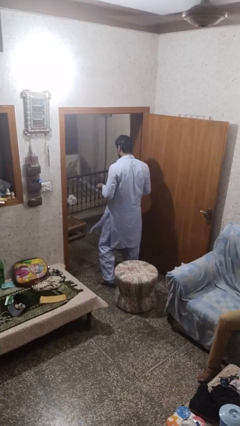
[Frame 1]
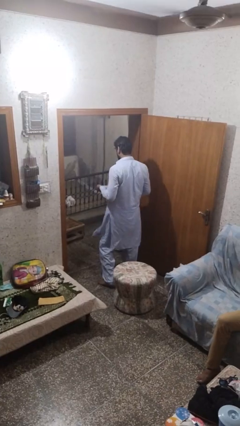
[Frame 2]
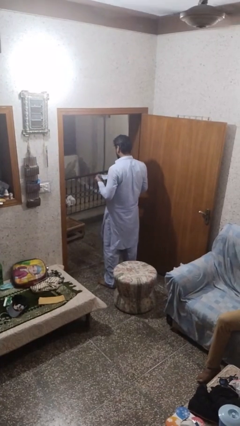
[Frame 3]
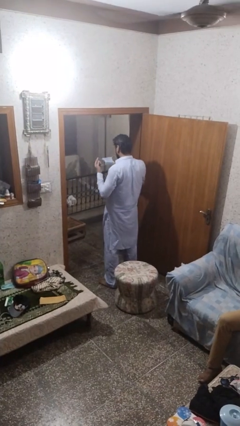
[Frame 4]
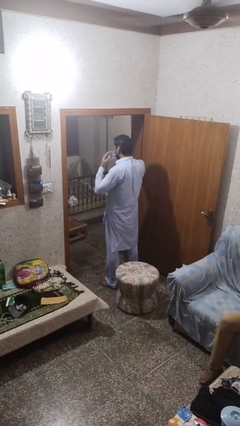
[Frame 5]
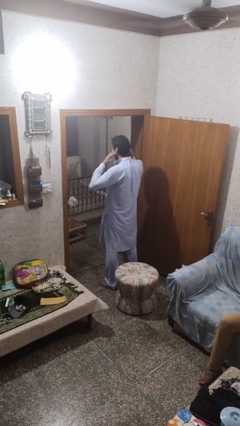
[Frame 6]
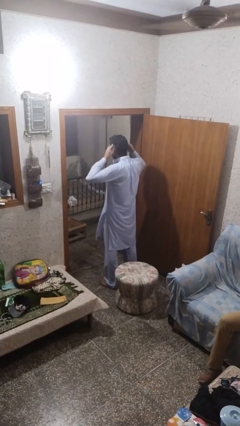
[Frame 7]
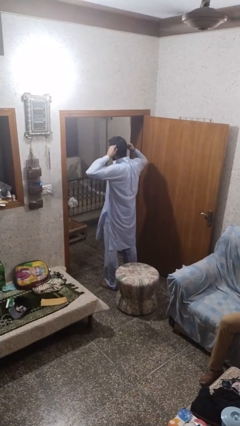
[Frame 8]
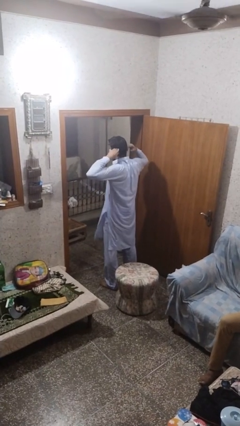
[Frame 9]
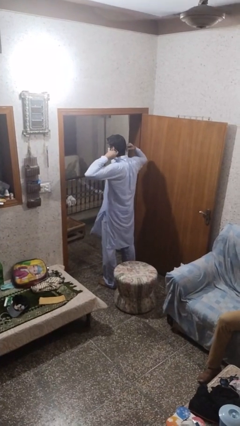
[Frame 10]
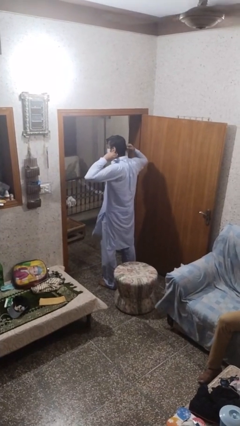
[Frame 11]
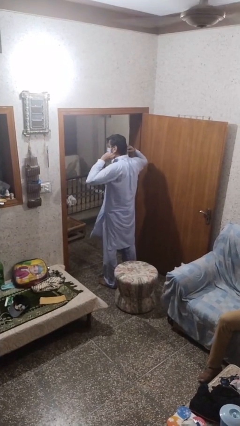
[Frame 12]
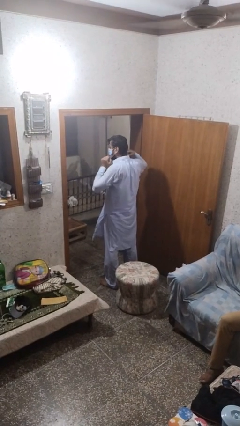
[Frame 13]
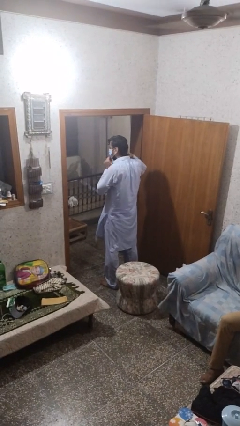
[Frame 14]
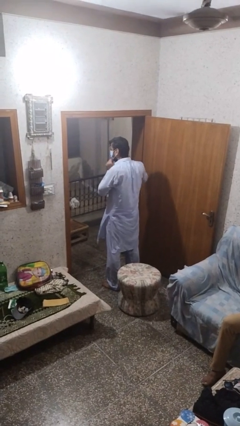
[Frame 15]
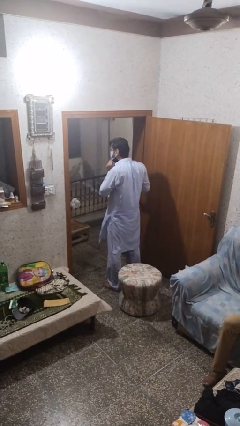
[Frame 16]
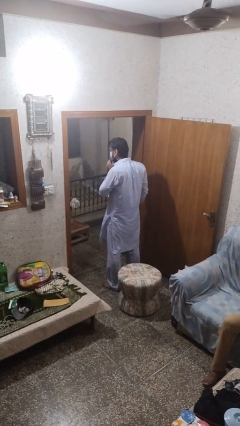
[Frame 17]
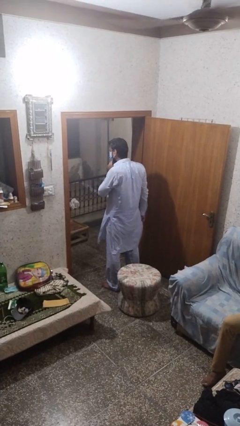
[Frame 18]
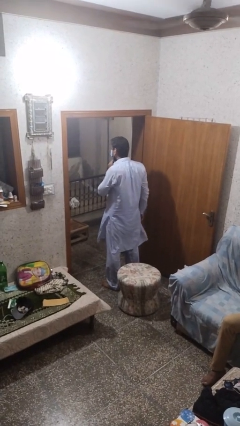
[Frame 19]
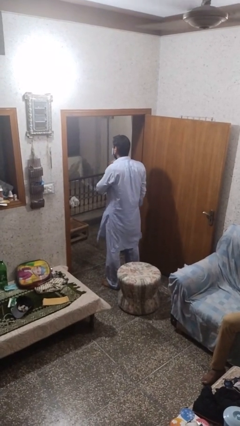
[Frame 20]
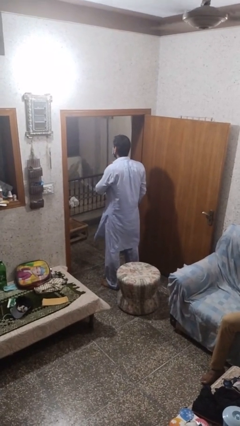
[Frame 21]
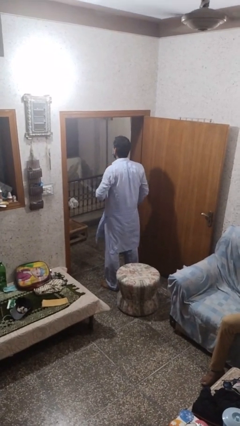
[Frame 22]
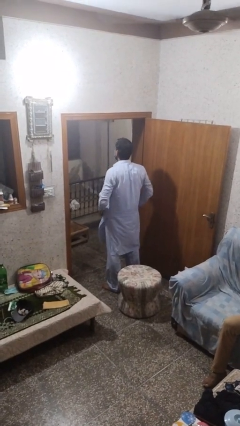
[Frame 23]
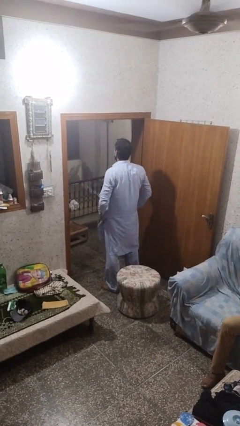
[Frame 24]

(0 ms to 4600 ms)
person puts on facemask

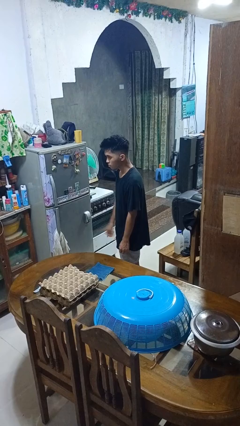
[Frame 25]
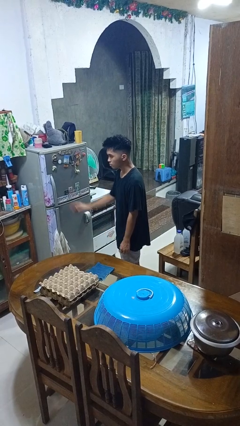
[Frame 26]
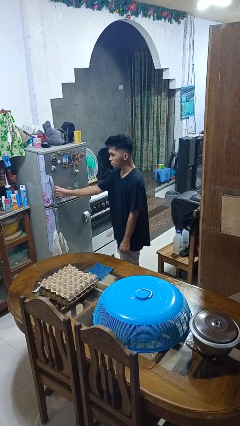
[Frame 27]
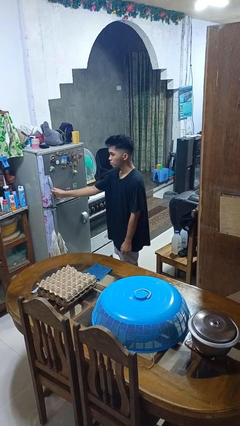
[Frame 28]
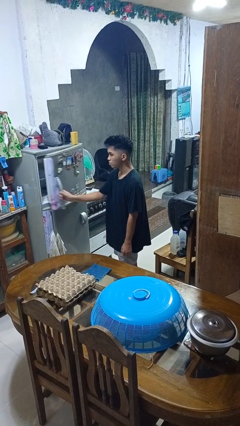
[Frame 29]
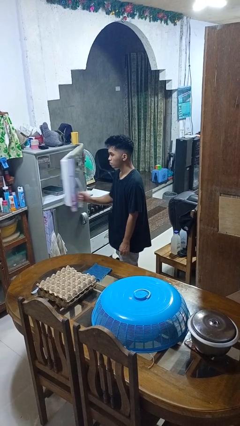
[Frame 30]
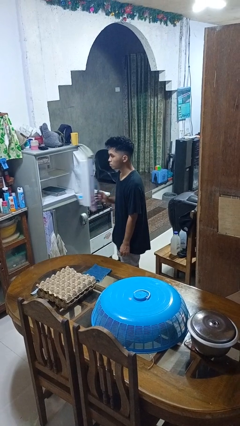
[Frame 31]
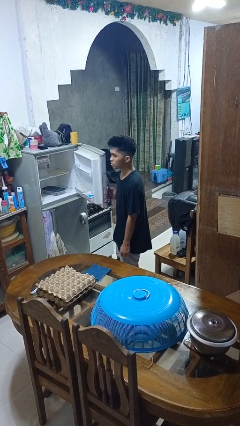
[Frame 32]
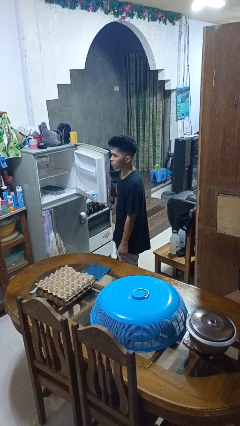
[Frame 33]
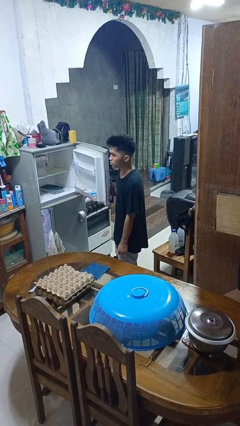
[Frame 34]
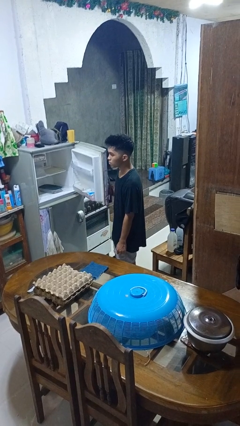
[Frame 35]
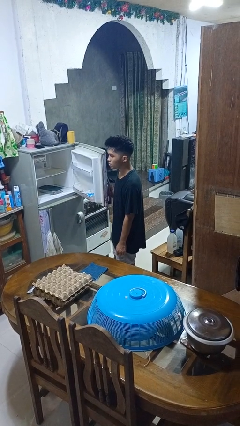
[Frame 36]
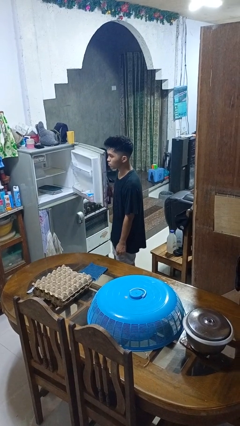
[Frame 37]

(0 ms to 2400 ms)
person opens refrigerator

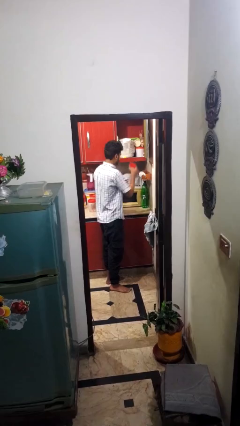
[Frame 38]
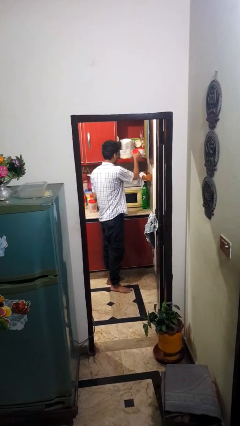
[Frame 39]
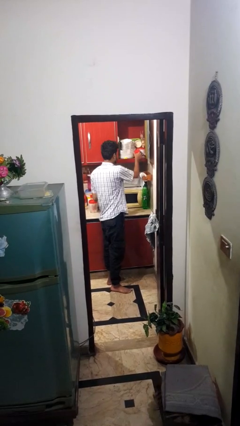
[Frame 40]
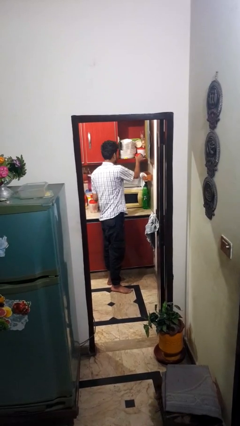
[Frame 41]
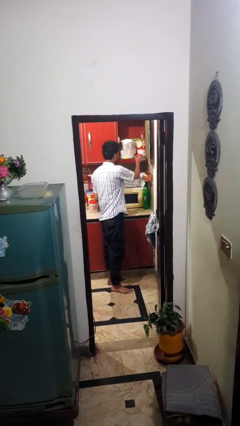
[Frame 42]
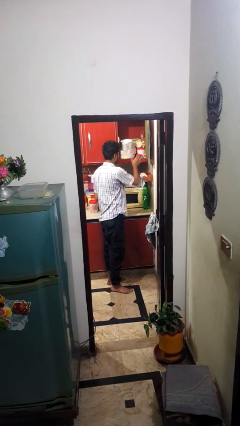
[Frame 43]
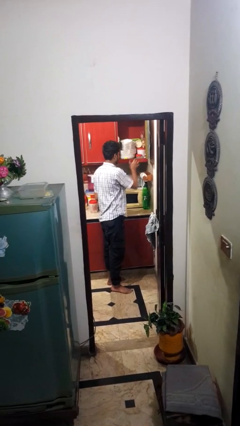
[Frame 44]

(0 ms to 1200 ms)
person puts down object into cabinet

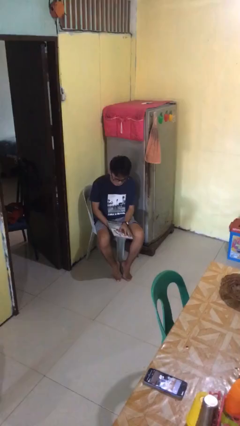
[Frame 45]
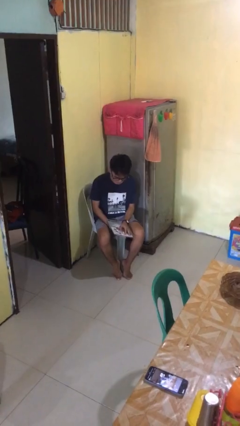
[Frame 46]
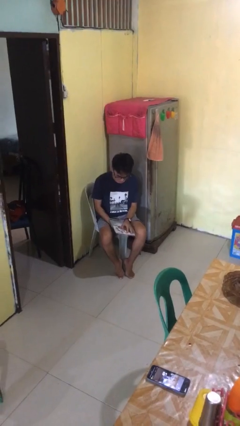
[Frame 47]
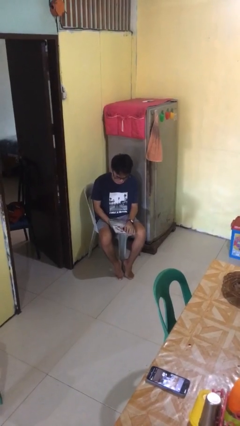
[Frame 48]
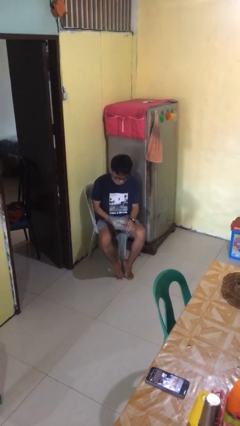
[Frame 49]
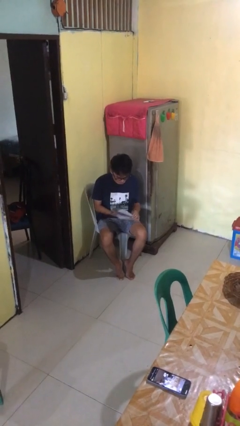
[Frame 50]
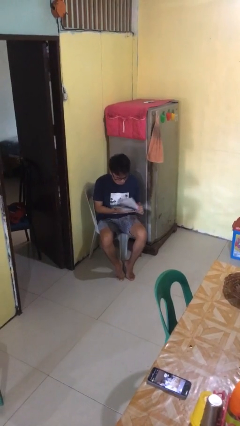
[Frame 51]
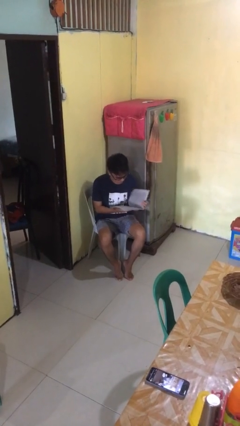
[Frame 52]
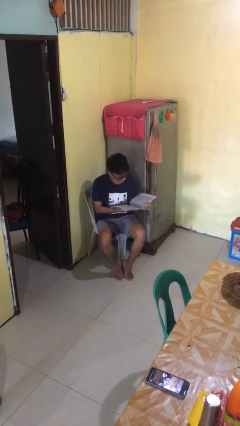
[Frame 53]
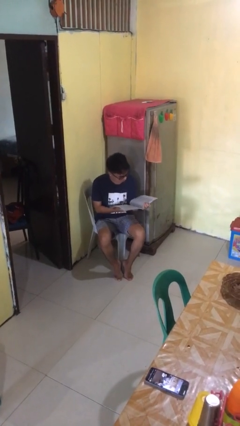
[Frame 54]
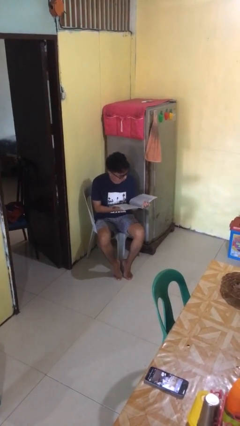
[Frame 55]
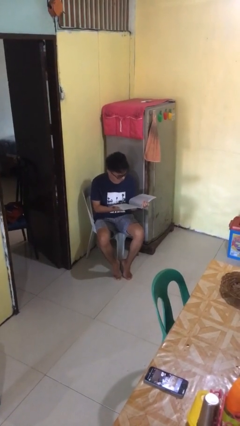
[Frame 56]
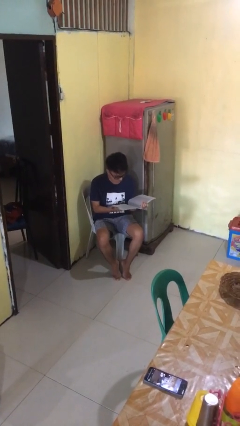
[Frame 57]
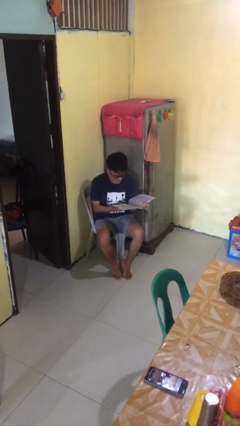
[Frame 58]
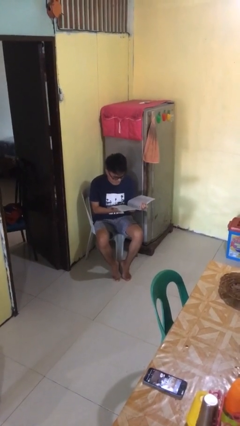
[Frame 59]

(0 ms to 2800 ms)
person reads book

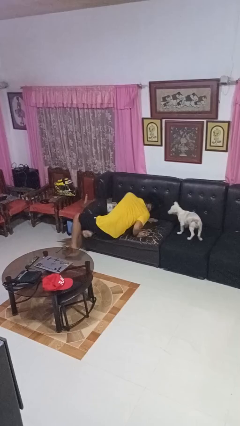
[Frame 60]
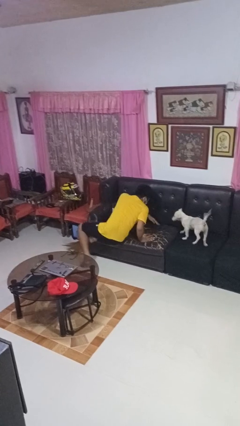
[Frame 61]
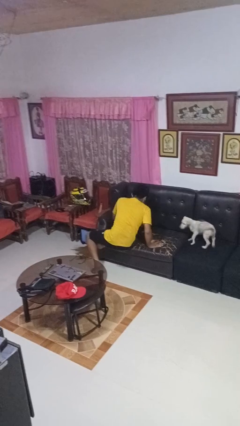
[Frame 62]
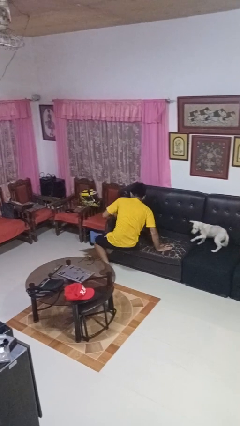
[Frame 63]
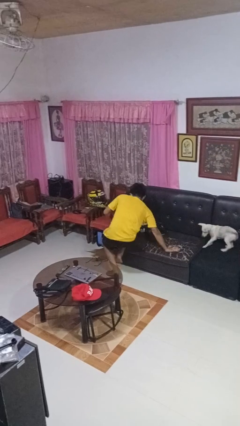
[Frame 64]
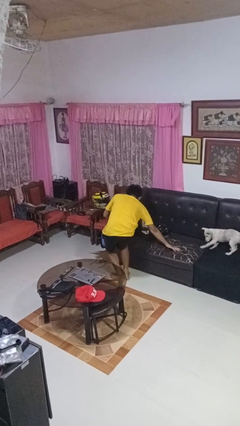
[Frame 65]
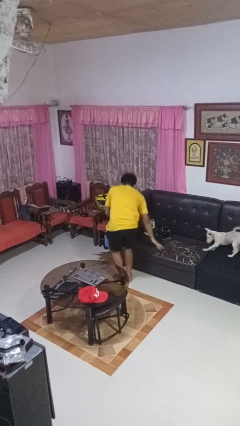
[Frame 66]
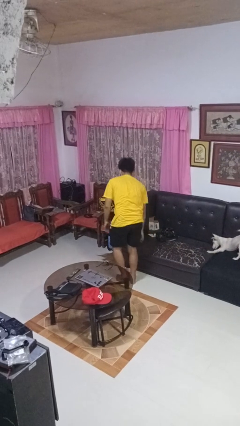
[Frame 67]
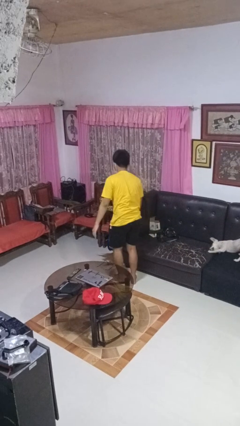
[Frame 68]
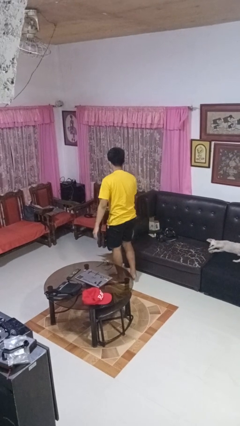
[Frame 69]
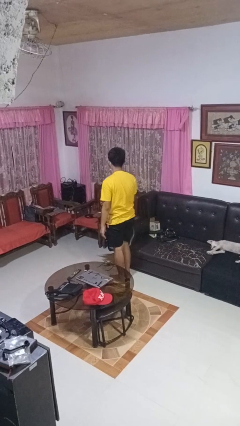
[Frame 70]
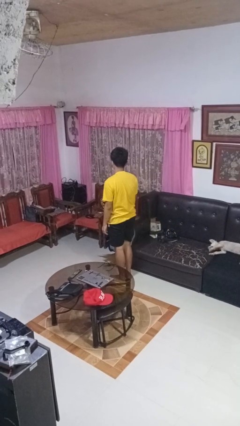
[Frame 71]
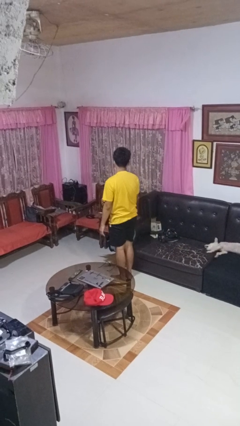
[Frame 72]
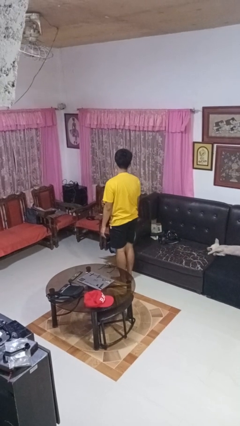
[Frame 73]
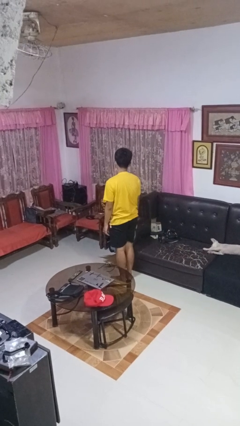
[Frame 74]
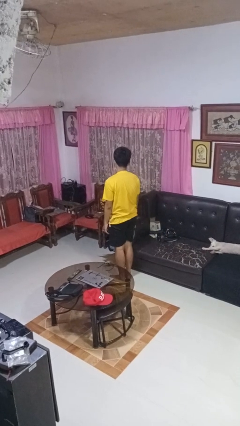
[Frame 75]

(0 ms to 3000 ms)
person stands up

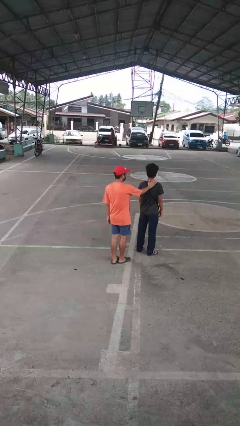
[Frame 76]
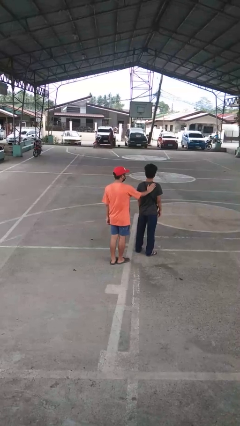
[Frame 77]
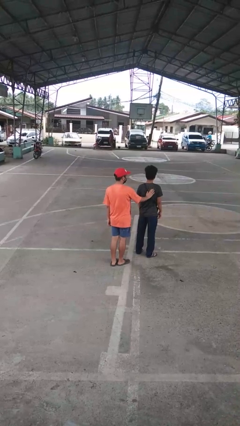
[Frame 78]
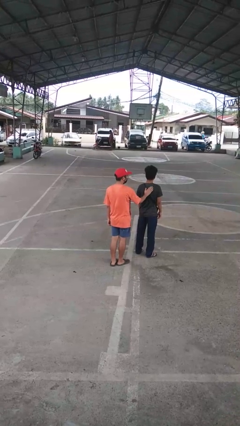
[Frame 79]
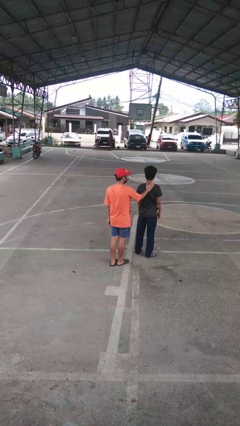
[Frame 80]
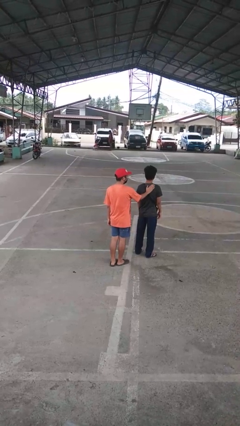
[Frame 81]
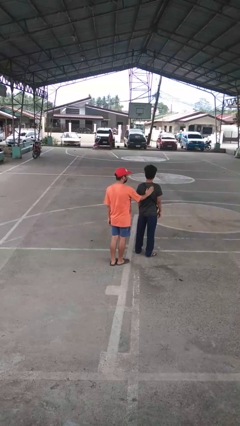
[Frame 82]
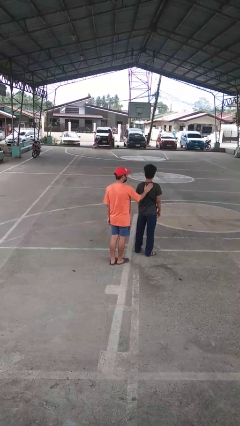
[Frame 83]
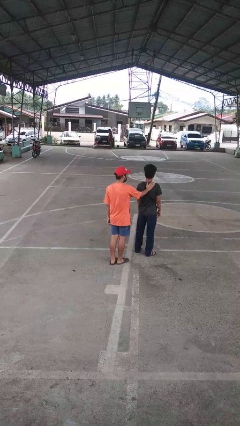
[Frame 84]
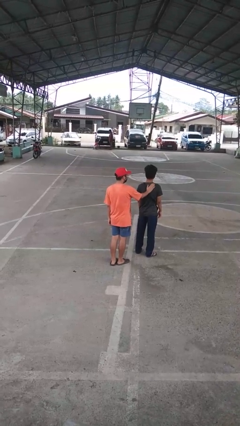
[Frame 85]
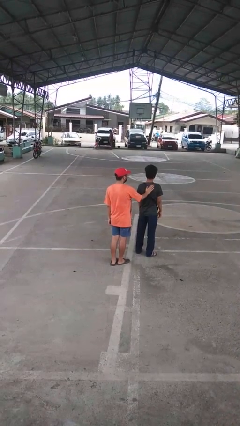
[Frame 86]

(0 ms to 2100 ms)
person touches back of person

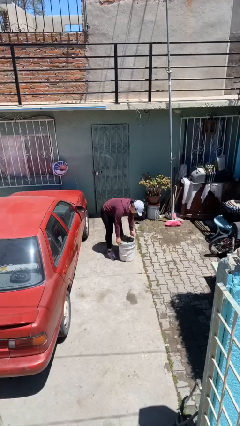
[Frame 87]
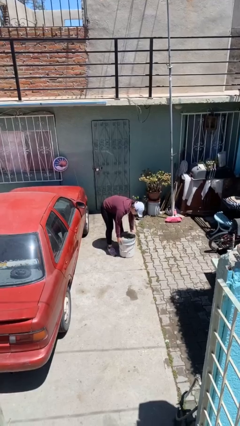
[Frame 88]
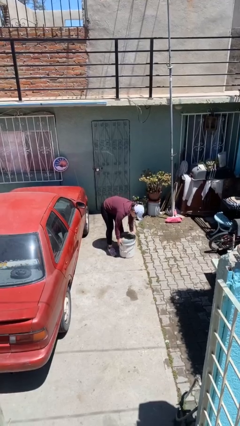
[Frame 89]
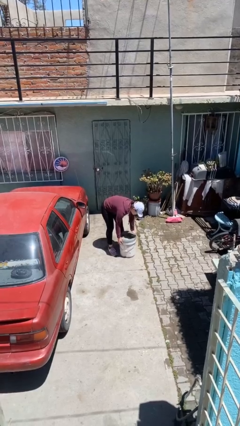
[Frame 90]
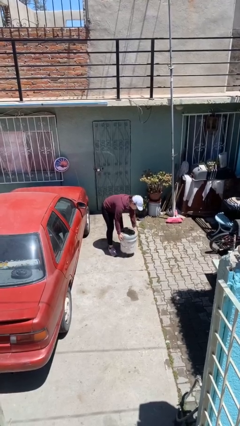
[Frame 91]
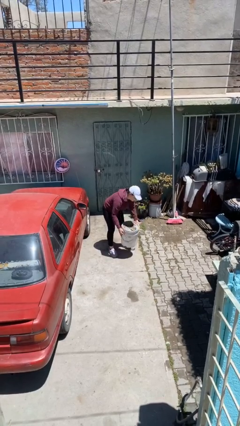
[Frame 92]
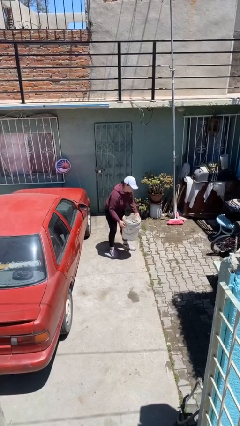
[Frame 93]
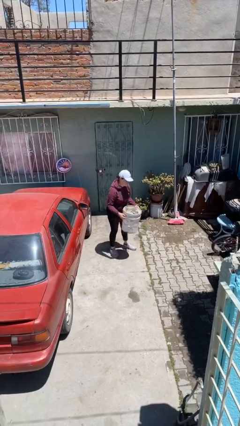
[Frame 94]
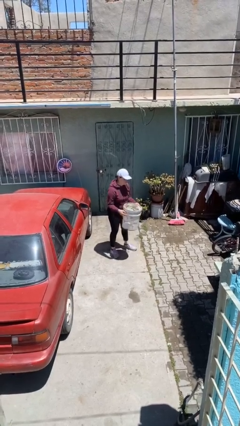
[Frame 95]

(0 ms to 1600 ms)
person picks up object from floor
